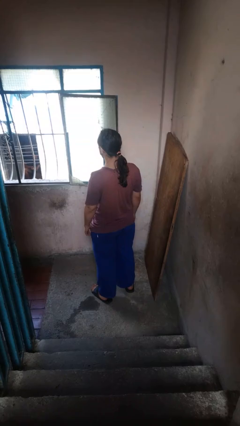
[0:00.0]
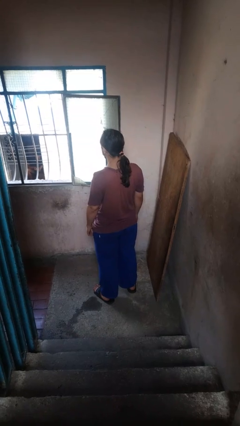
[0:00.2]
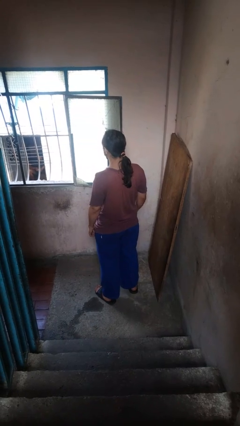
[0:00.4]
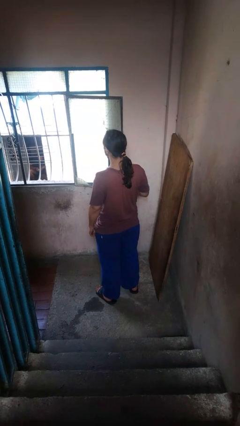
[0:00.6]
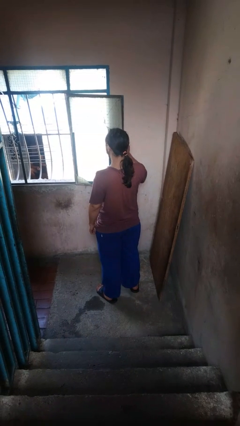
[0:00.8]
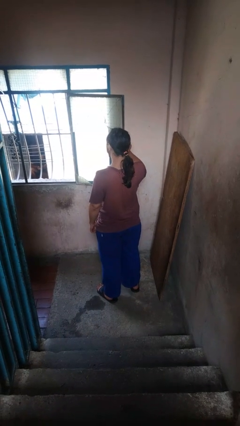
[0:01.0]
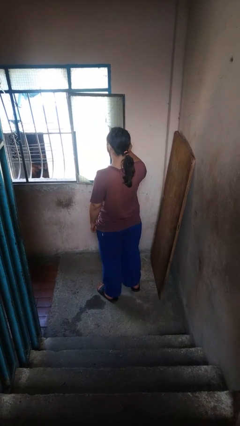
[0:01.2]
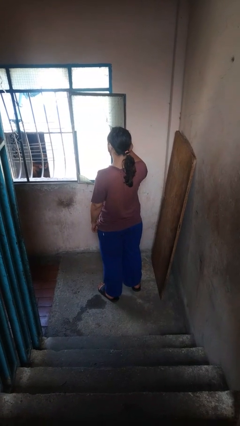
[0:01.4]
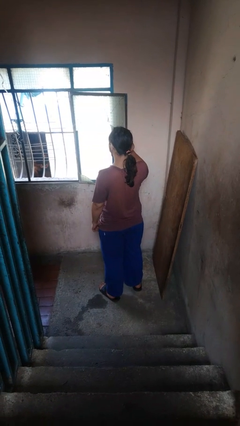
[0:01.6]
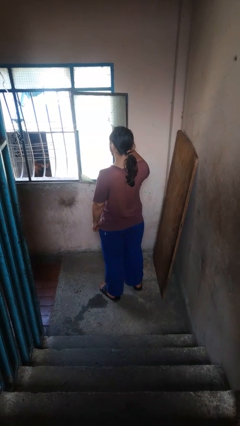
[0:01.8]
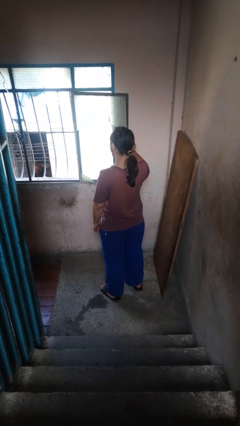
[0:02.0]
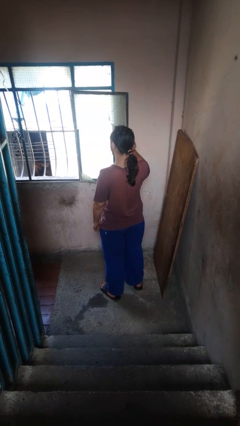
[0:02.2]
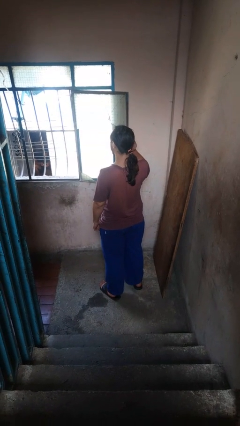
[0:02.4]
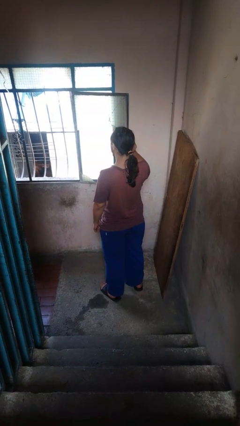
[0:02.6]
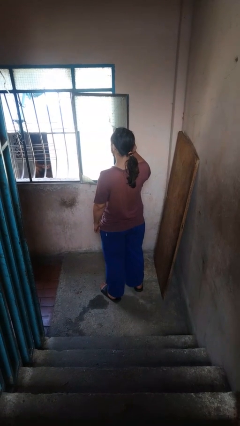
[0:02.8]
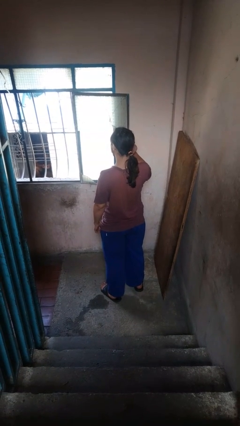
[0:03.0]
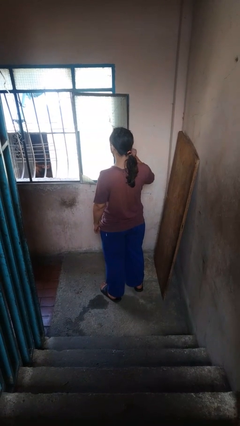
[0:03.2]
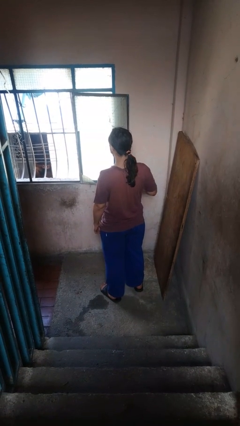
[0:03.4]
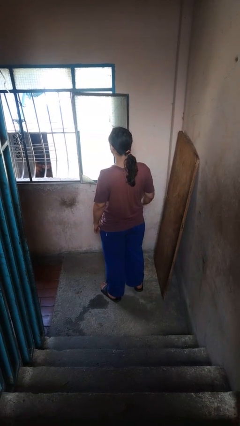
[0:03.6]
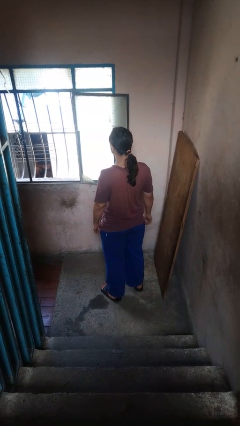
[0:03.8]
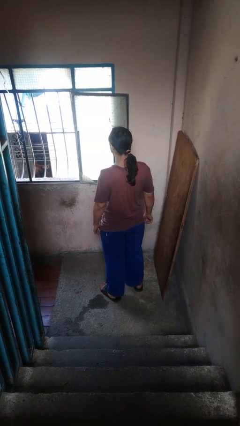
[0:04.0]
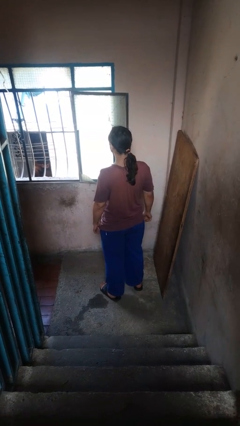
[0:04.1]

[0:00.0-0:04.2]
person touches earlobe

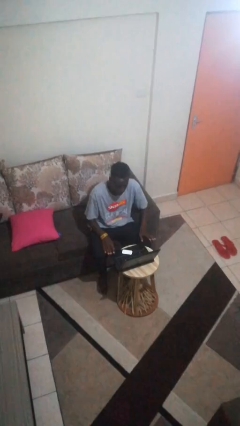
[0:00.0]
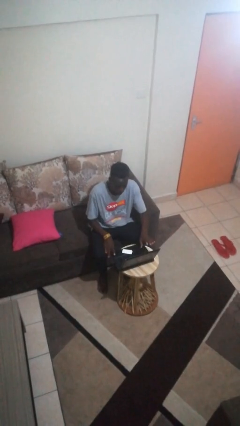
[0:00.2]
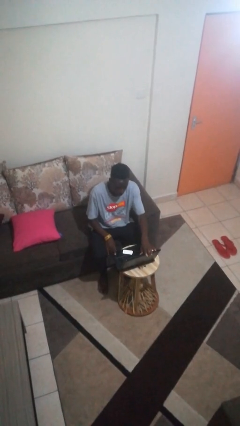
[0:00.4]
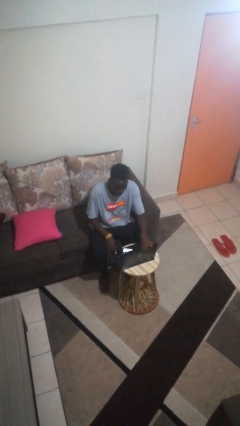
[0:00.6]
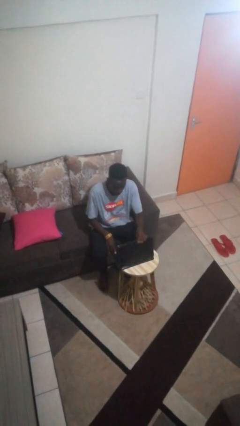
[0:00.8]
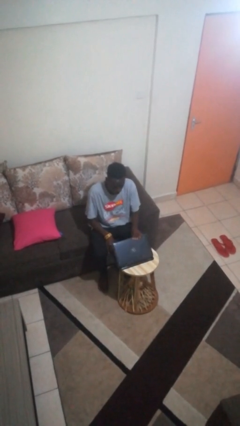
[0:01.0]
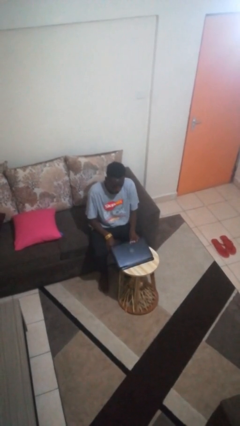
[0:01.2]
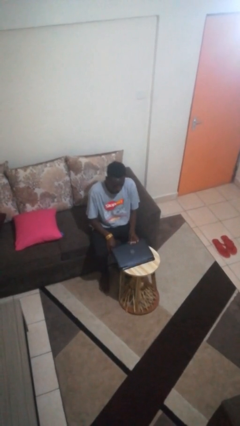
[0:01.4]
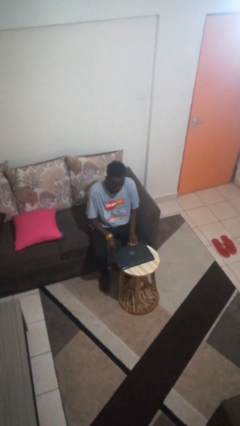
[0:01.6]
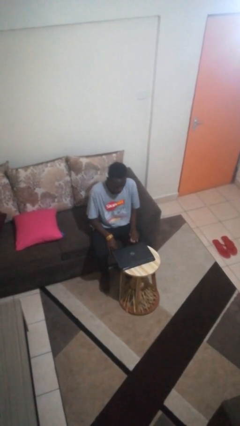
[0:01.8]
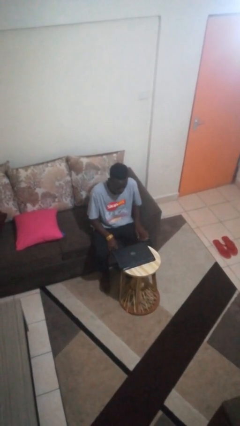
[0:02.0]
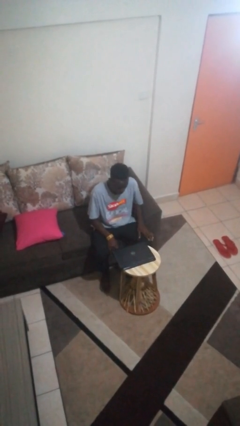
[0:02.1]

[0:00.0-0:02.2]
person closes laptop

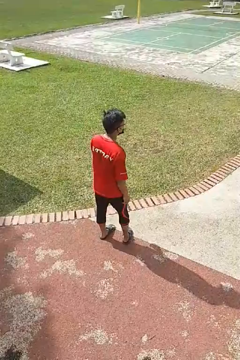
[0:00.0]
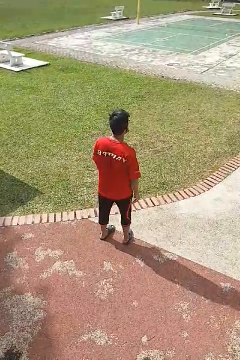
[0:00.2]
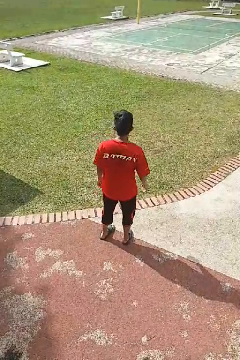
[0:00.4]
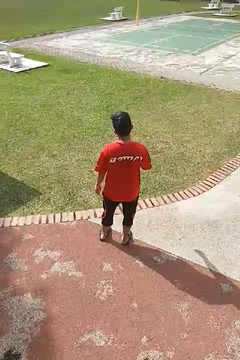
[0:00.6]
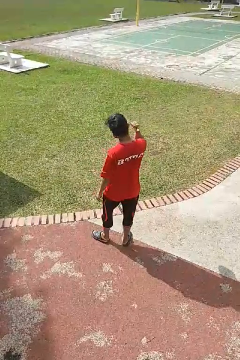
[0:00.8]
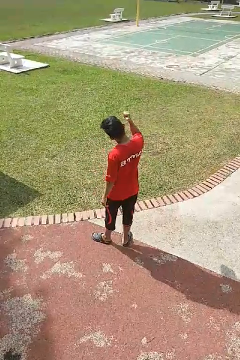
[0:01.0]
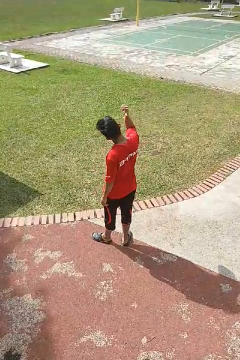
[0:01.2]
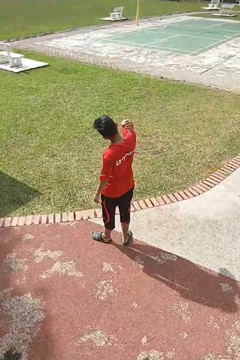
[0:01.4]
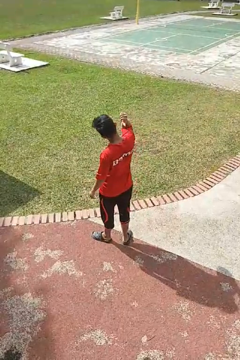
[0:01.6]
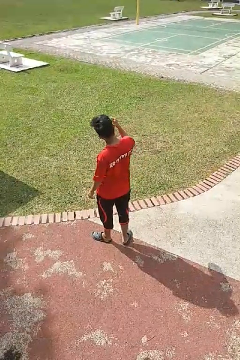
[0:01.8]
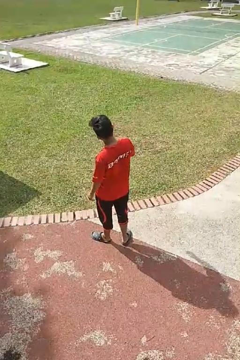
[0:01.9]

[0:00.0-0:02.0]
person gestures behind me

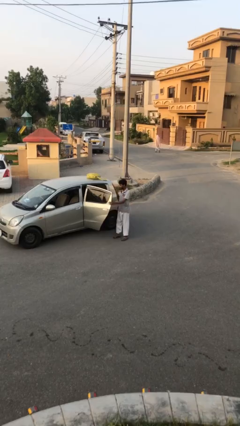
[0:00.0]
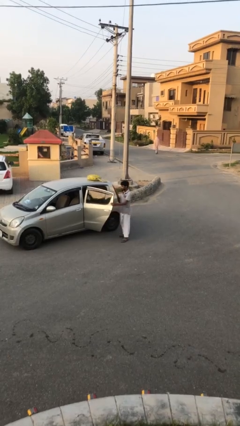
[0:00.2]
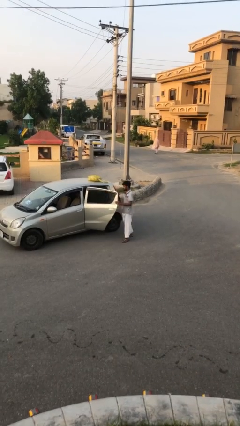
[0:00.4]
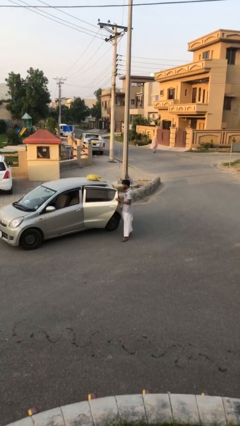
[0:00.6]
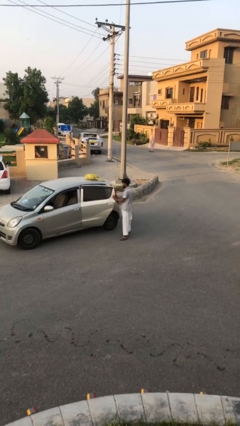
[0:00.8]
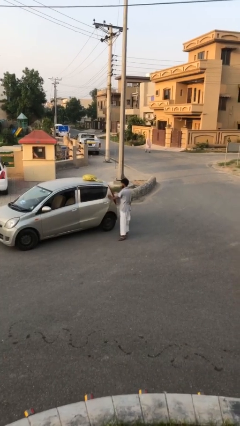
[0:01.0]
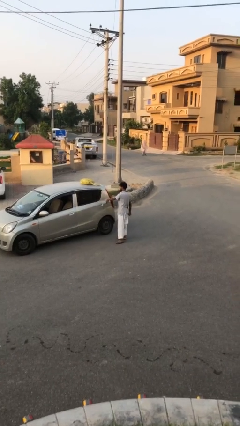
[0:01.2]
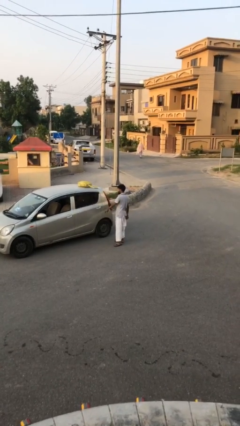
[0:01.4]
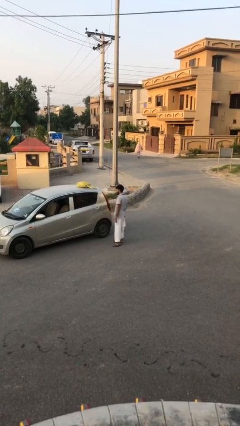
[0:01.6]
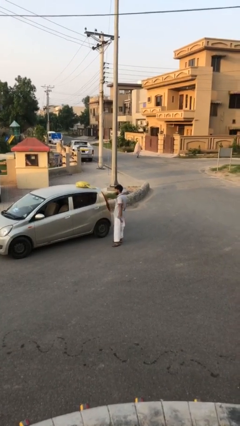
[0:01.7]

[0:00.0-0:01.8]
person closes car door

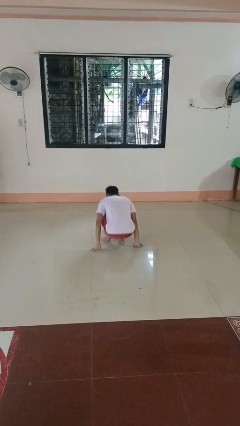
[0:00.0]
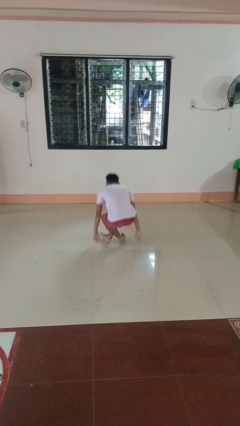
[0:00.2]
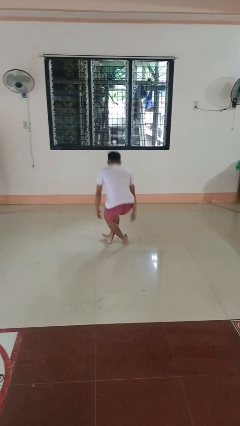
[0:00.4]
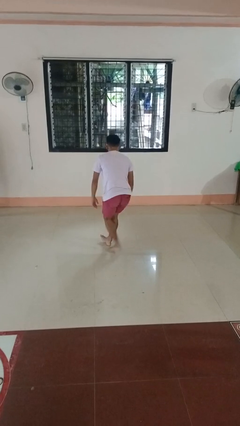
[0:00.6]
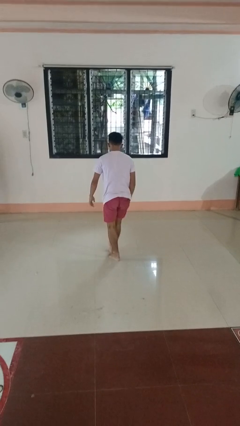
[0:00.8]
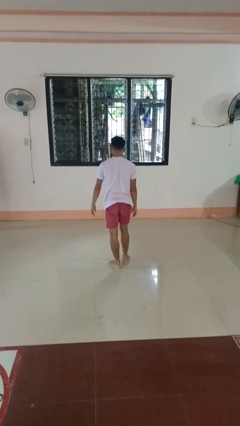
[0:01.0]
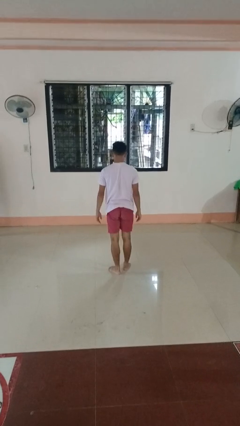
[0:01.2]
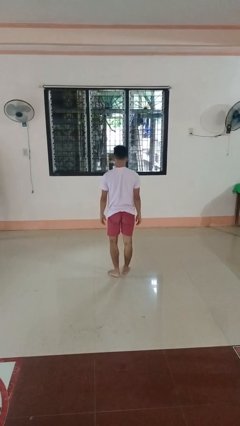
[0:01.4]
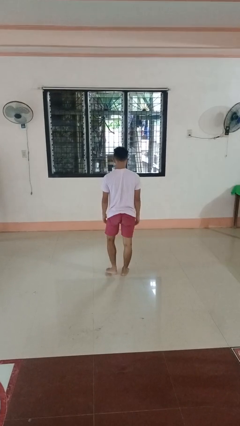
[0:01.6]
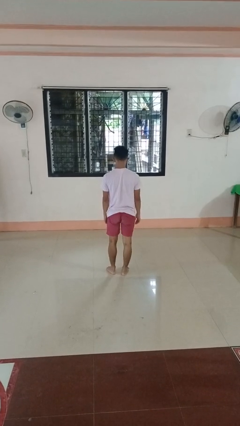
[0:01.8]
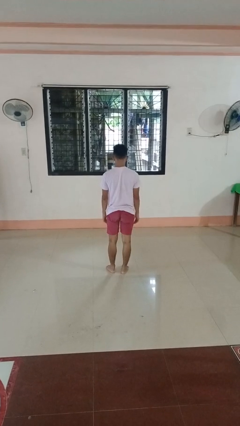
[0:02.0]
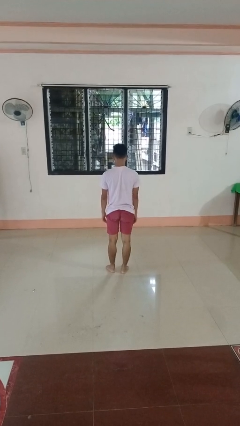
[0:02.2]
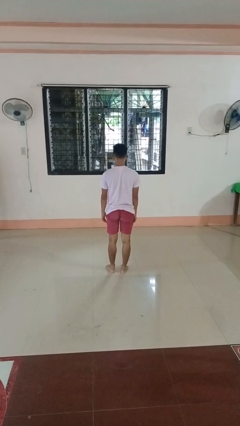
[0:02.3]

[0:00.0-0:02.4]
person stands up from floor

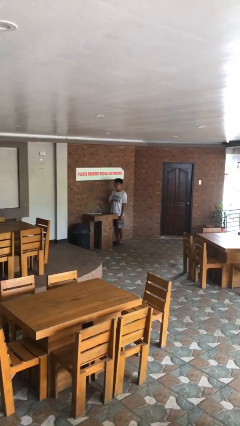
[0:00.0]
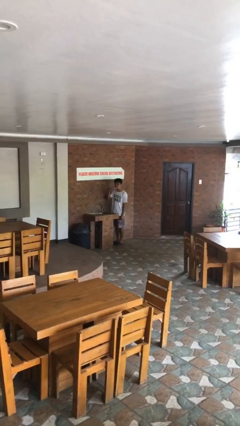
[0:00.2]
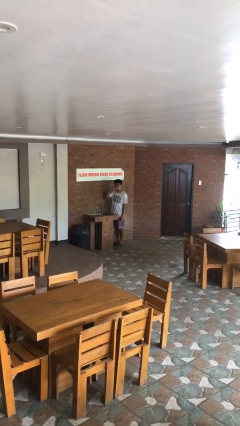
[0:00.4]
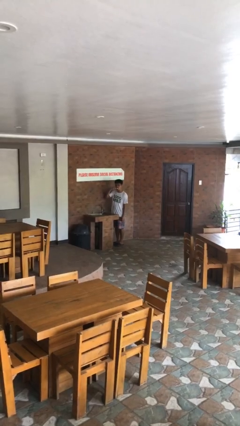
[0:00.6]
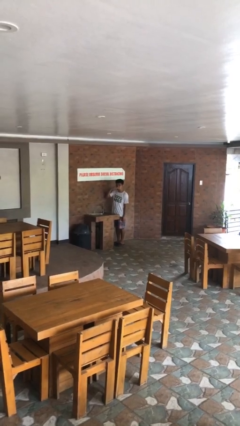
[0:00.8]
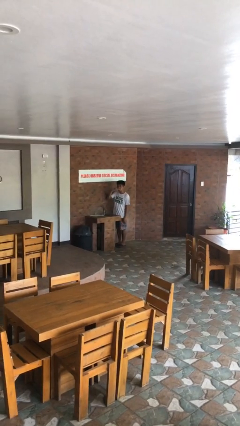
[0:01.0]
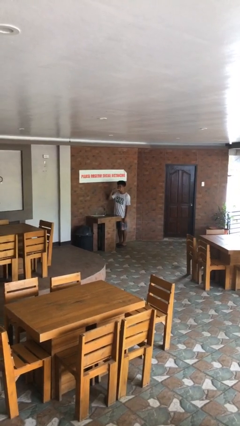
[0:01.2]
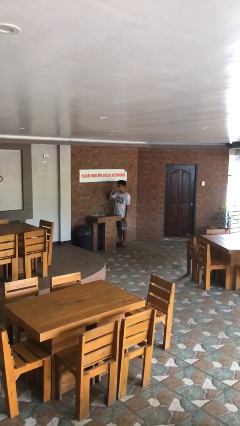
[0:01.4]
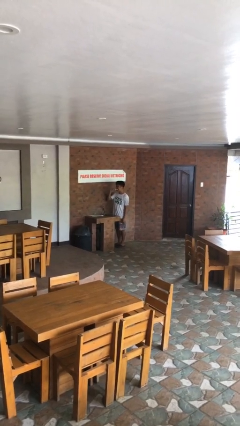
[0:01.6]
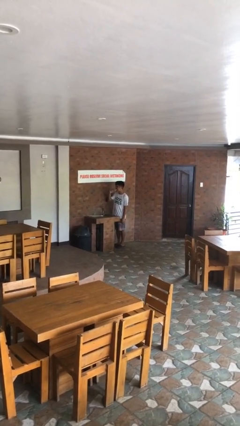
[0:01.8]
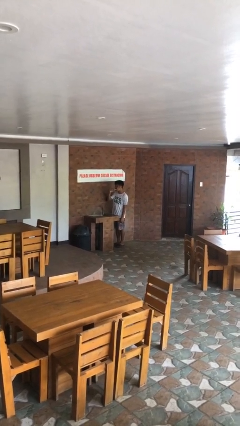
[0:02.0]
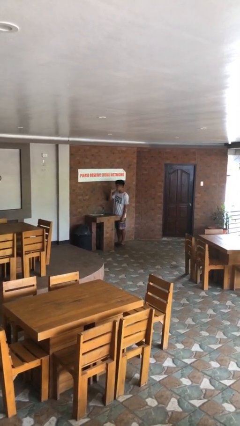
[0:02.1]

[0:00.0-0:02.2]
person brushes teeth

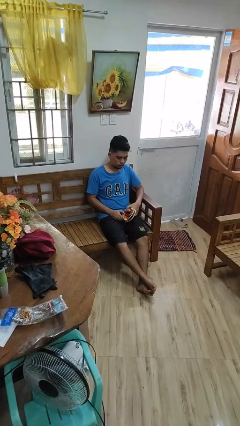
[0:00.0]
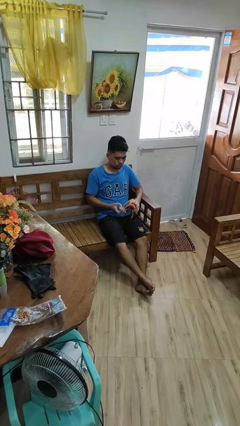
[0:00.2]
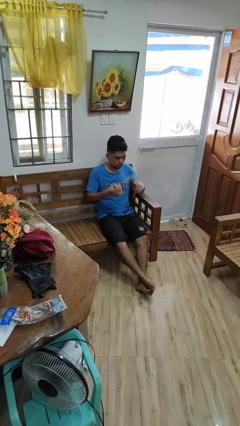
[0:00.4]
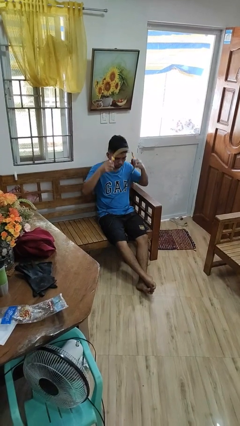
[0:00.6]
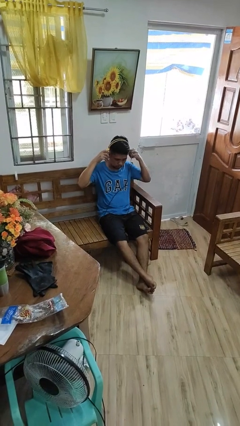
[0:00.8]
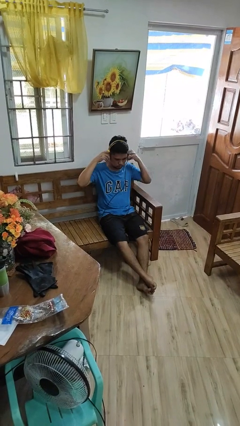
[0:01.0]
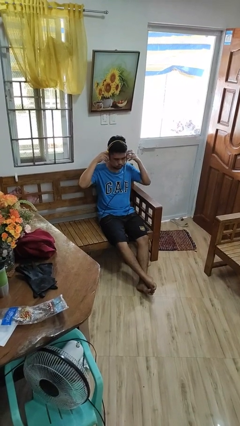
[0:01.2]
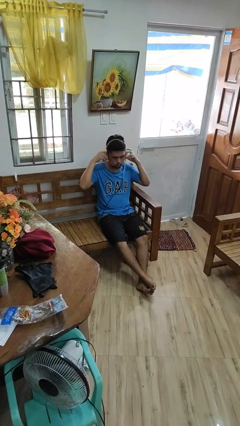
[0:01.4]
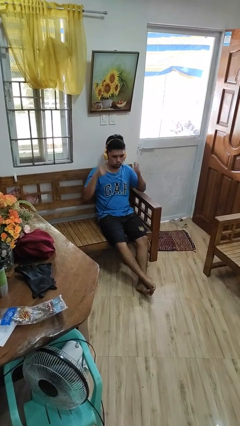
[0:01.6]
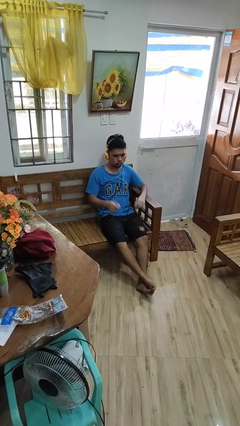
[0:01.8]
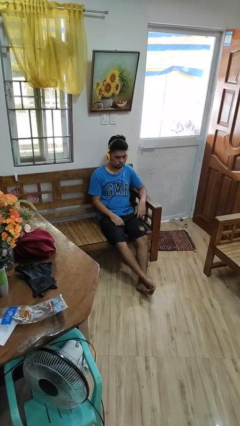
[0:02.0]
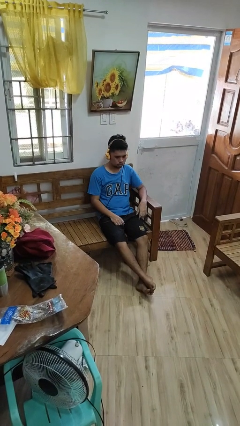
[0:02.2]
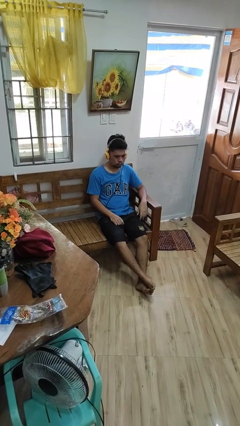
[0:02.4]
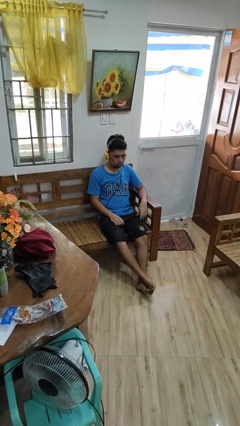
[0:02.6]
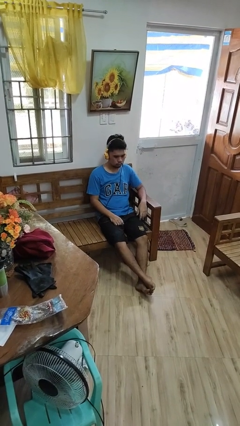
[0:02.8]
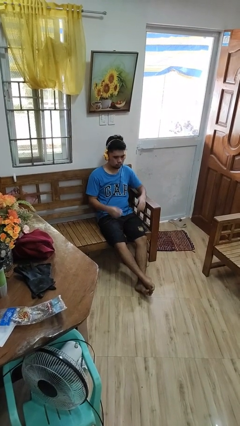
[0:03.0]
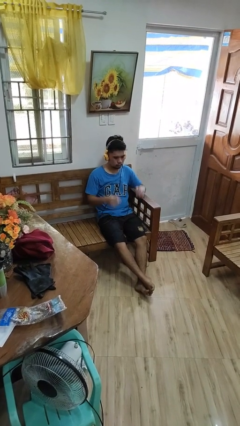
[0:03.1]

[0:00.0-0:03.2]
person puts on headphones
